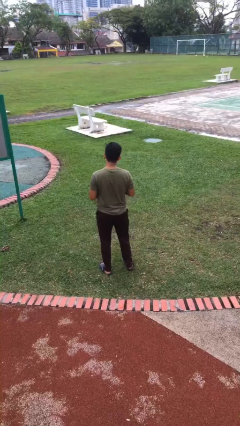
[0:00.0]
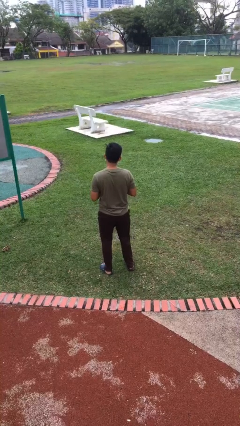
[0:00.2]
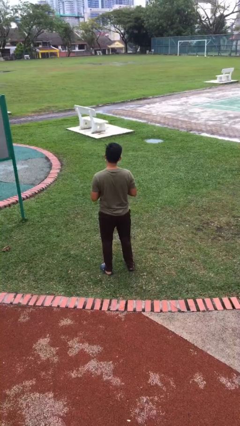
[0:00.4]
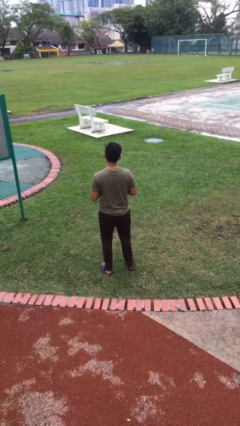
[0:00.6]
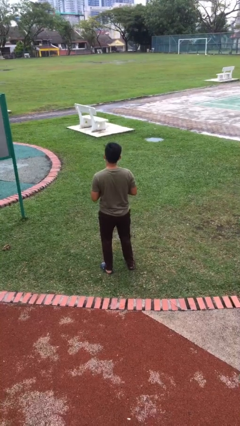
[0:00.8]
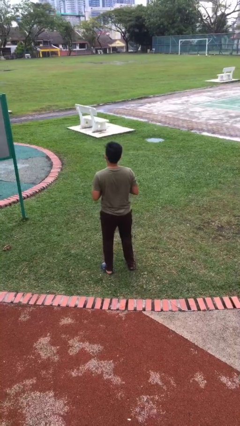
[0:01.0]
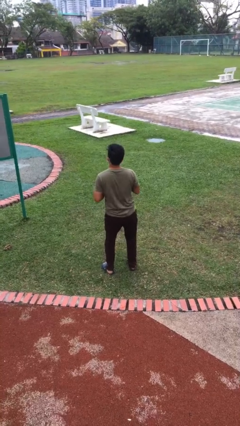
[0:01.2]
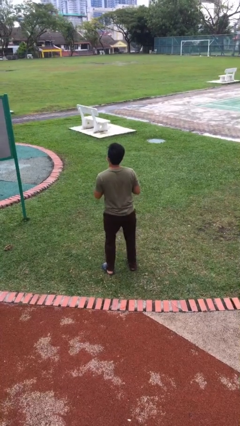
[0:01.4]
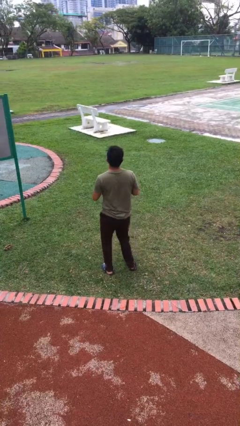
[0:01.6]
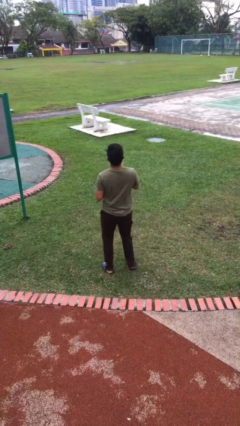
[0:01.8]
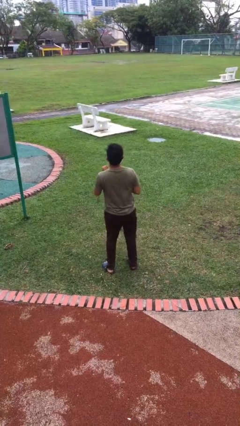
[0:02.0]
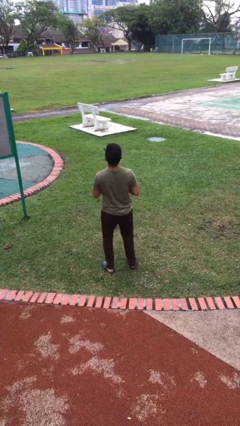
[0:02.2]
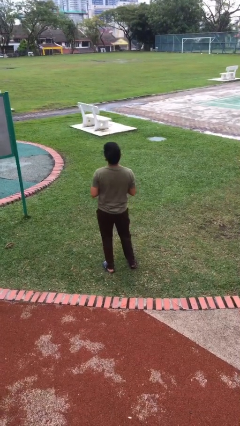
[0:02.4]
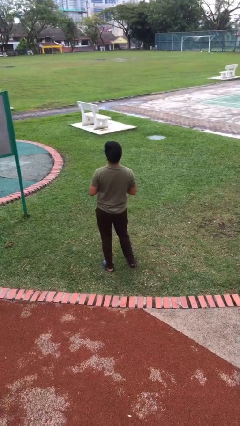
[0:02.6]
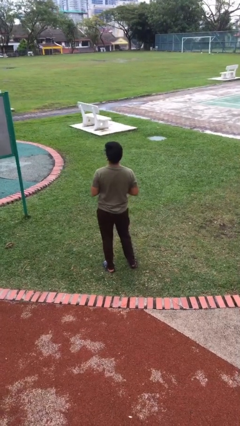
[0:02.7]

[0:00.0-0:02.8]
person wiggles hips

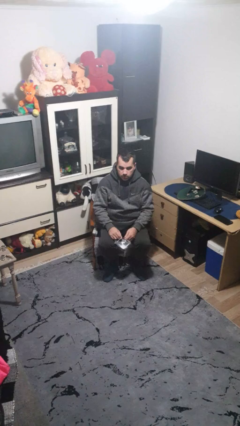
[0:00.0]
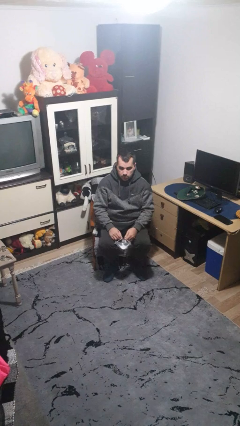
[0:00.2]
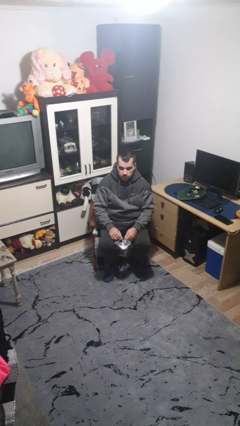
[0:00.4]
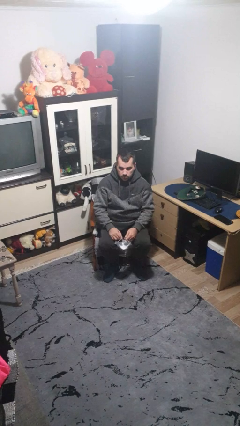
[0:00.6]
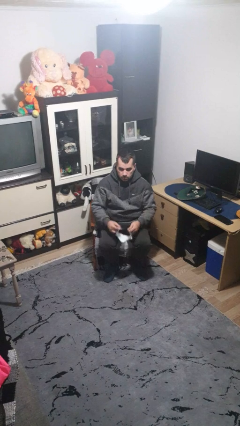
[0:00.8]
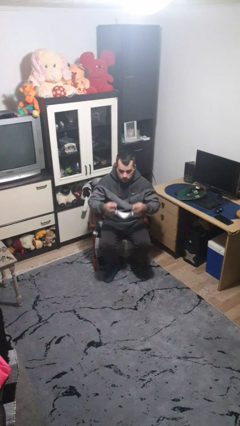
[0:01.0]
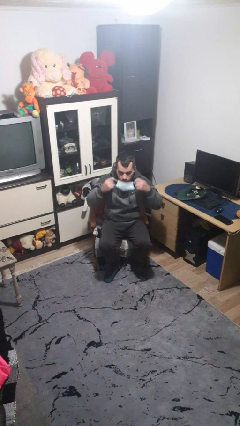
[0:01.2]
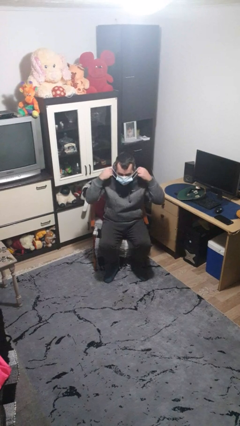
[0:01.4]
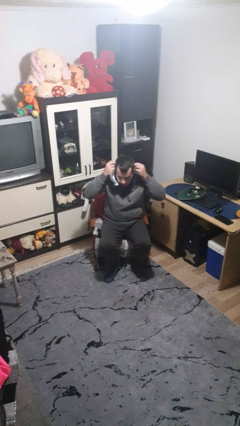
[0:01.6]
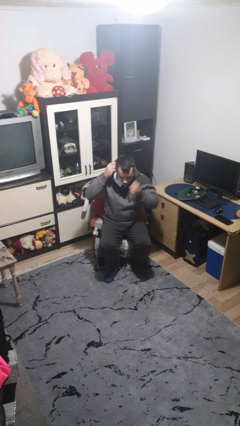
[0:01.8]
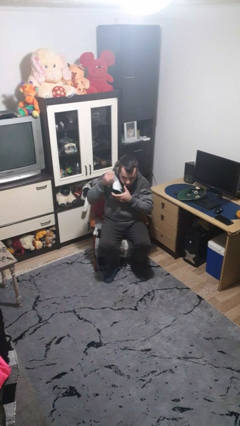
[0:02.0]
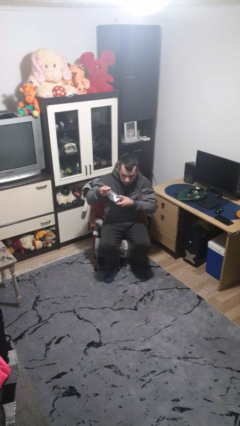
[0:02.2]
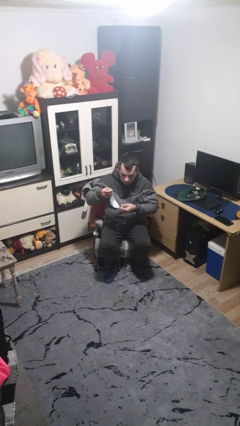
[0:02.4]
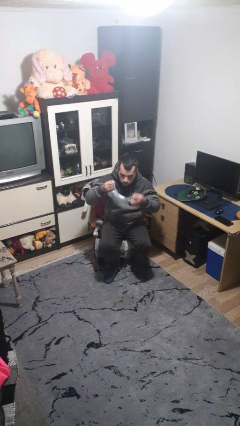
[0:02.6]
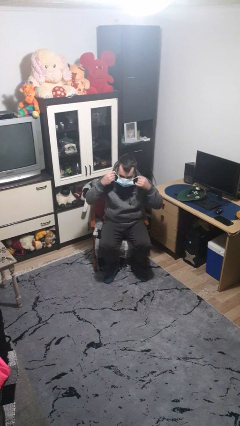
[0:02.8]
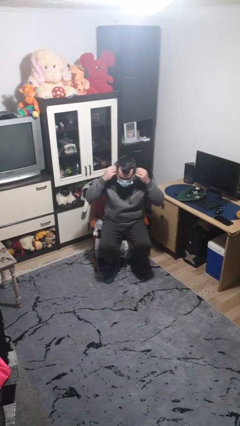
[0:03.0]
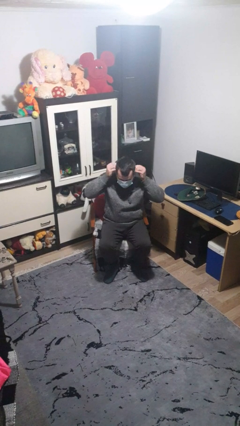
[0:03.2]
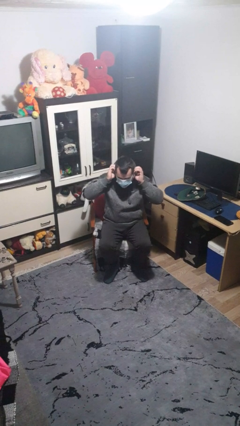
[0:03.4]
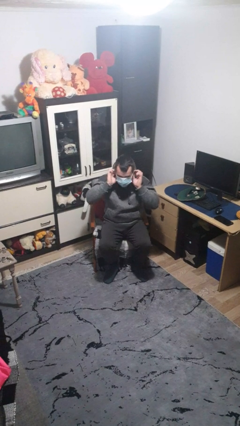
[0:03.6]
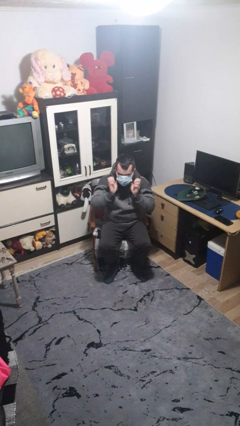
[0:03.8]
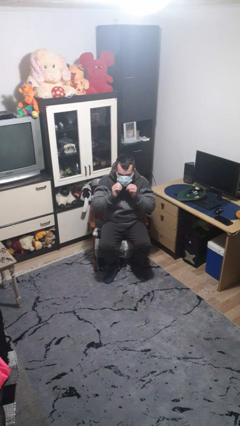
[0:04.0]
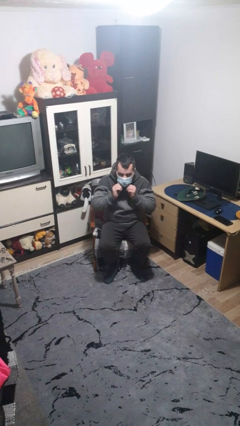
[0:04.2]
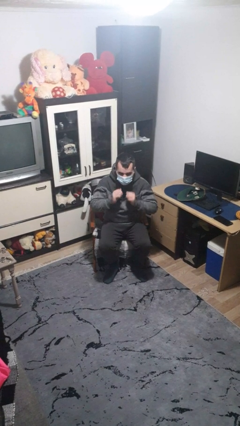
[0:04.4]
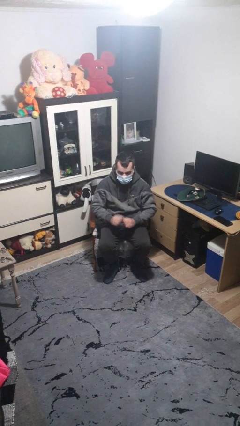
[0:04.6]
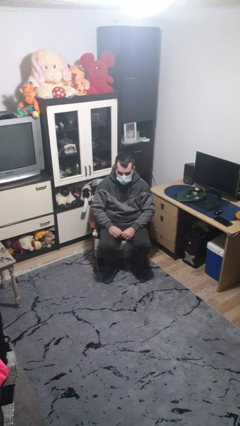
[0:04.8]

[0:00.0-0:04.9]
person puts on facemask

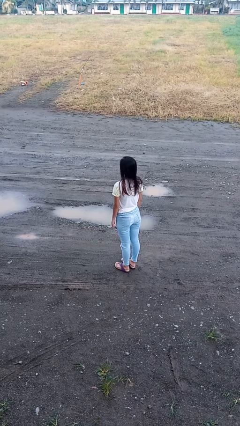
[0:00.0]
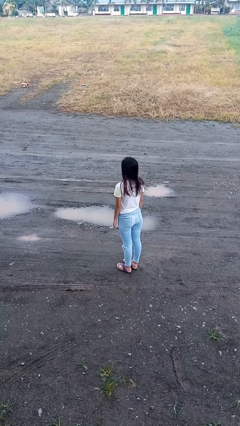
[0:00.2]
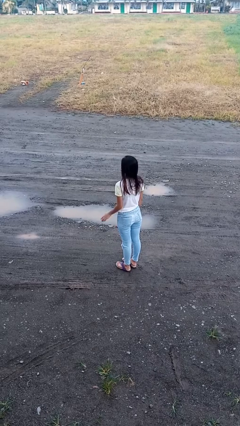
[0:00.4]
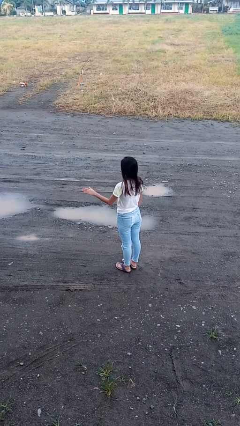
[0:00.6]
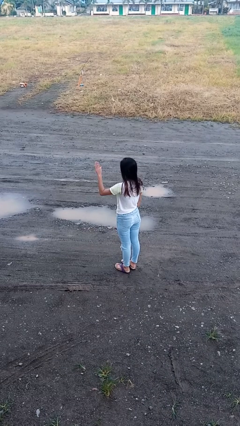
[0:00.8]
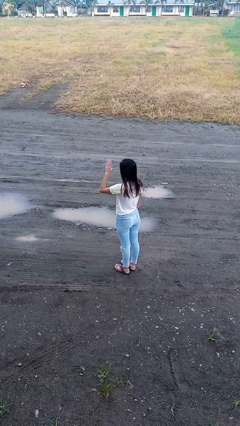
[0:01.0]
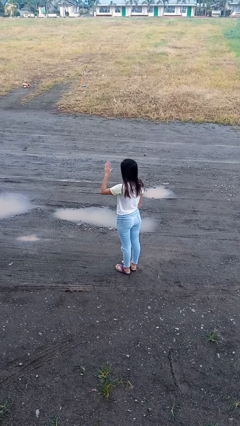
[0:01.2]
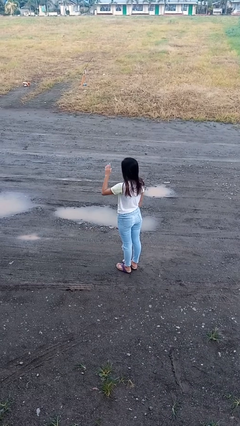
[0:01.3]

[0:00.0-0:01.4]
person gestures swipe right

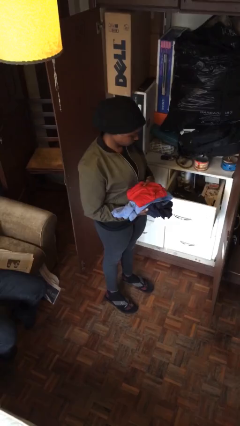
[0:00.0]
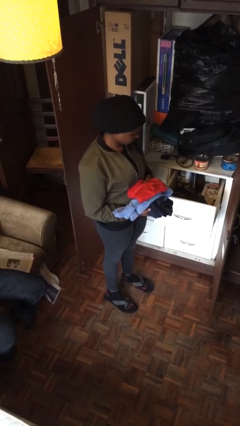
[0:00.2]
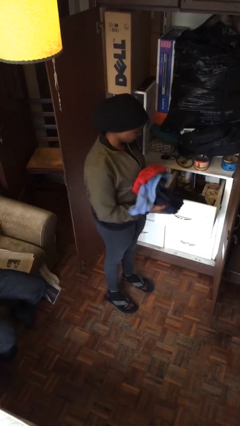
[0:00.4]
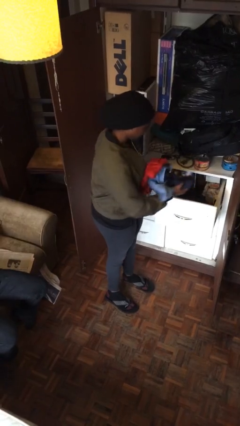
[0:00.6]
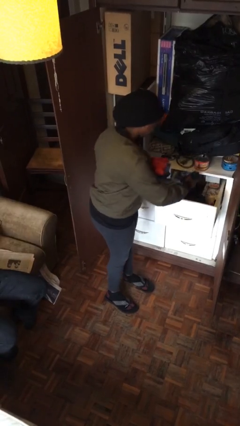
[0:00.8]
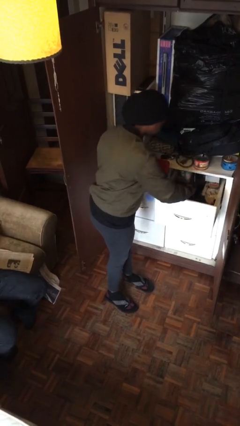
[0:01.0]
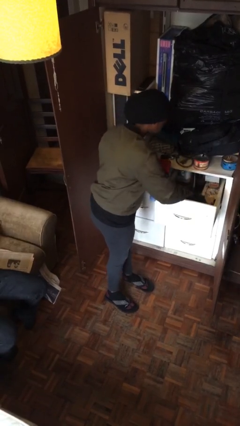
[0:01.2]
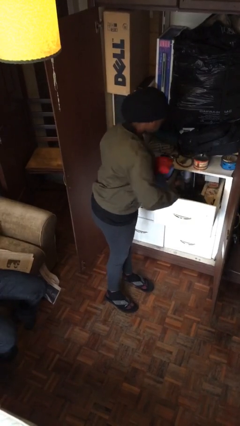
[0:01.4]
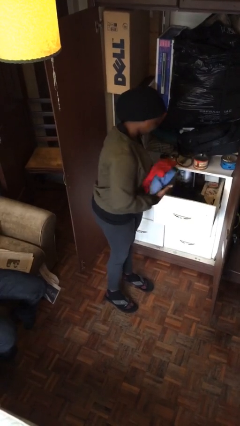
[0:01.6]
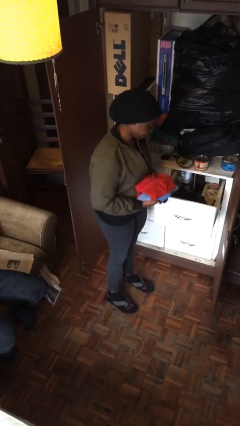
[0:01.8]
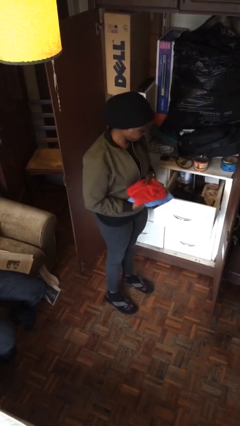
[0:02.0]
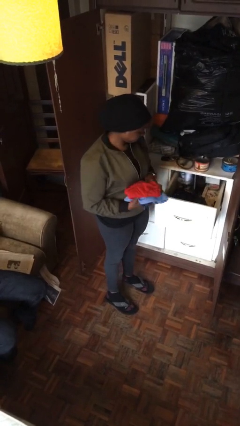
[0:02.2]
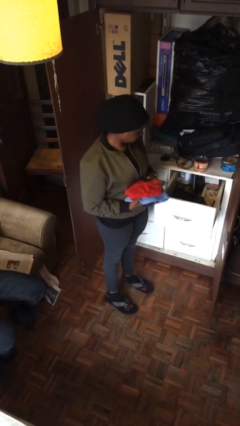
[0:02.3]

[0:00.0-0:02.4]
person puts clothes into dresser

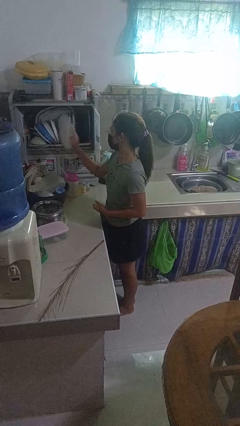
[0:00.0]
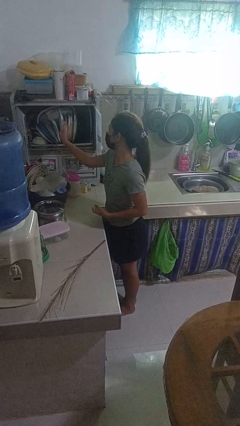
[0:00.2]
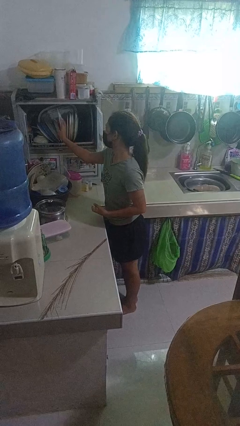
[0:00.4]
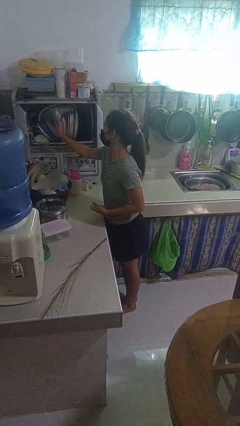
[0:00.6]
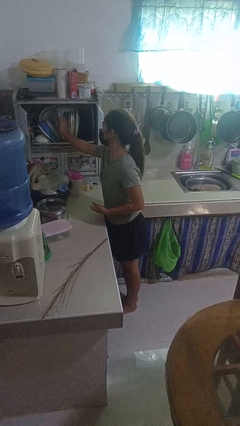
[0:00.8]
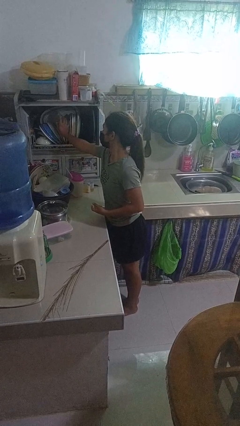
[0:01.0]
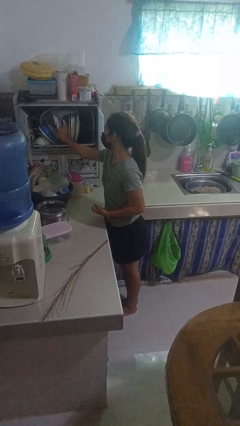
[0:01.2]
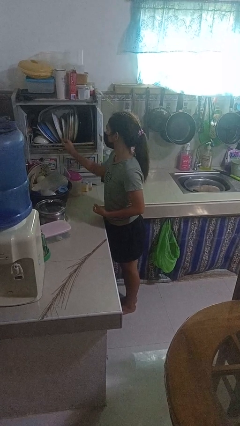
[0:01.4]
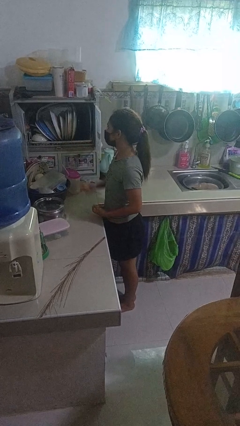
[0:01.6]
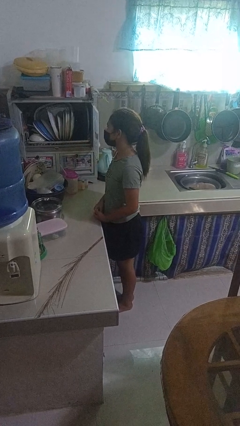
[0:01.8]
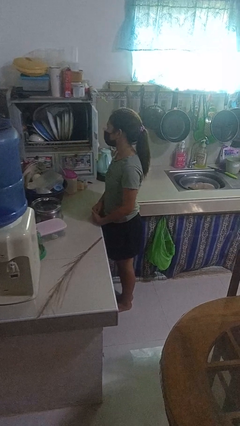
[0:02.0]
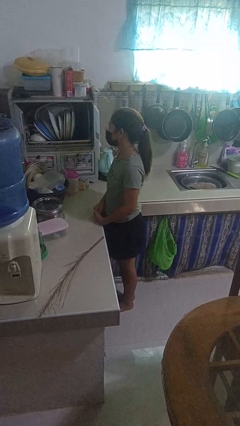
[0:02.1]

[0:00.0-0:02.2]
person puts object into kitchen drawer

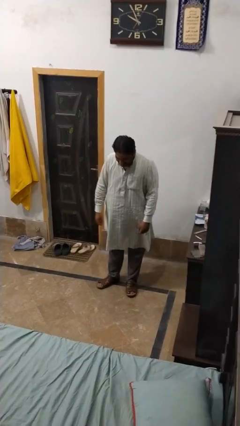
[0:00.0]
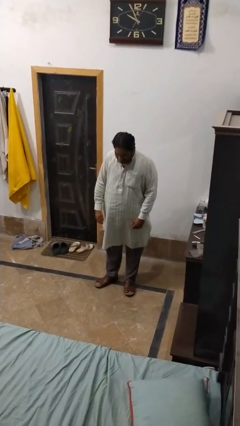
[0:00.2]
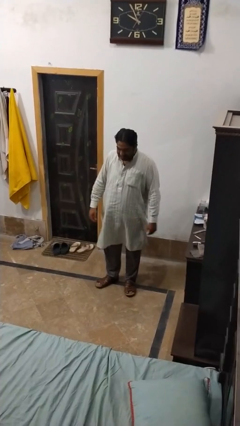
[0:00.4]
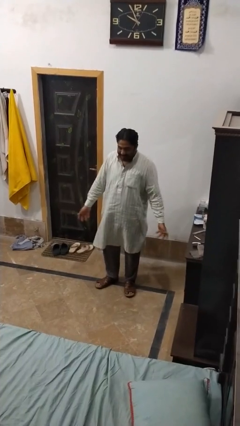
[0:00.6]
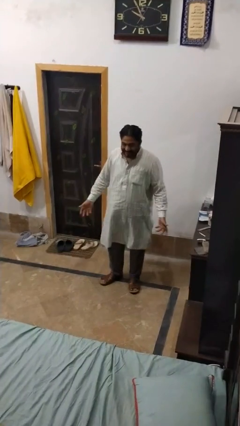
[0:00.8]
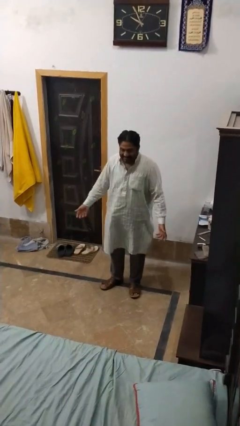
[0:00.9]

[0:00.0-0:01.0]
person dances in place

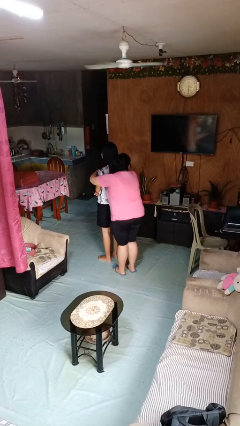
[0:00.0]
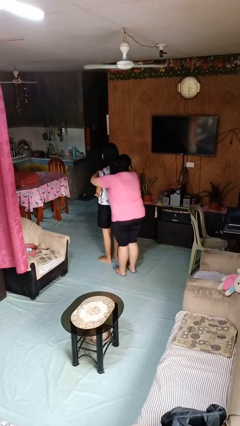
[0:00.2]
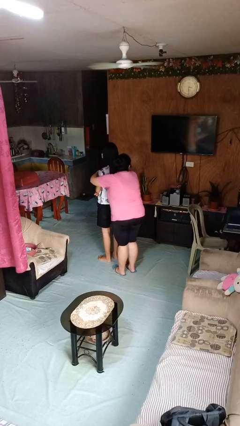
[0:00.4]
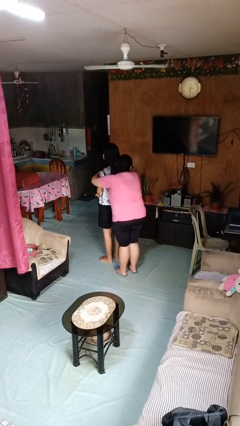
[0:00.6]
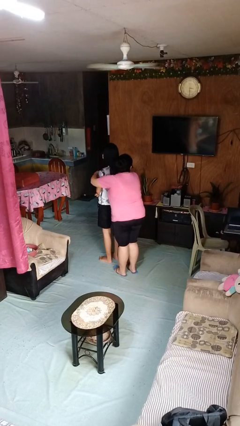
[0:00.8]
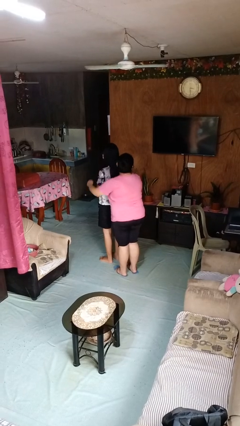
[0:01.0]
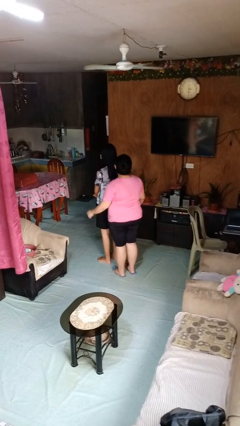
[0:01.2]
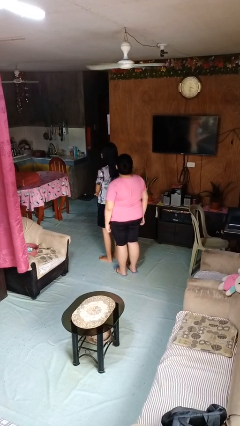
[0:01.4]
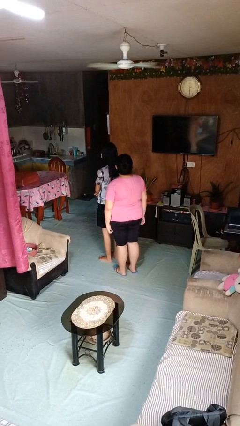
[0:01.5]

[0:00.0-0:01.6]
person hugs person from behind

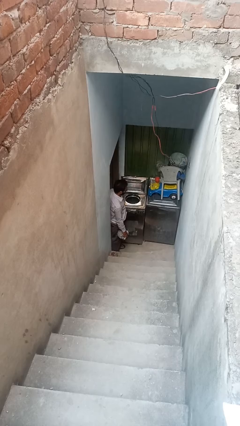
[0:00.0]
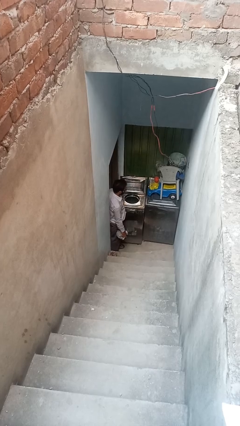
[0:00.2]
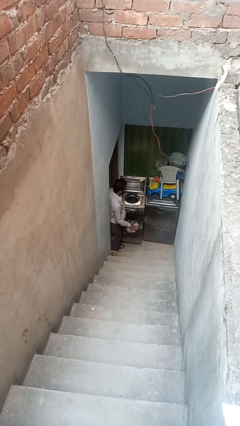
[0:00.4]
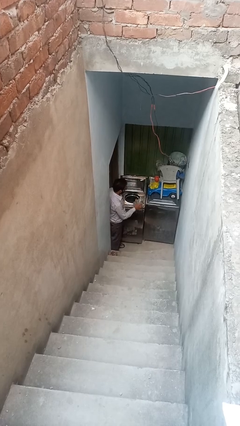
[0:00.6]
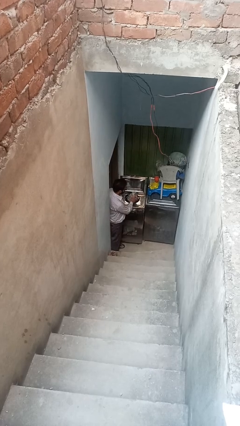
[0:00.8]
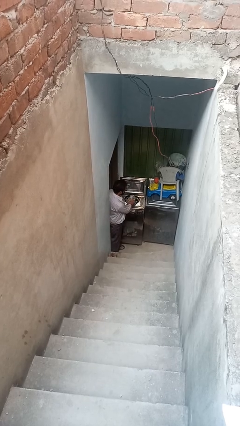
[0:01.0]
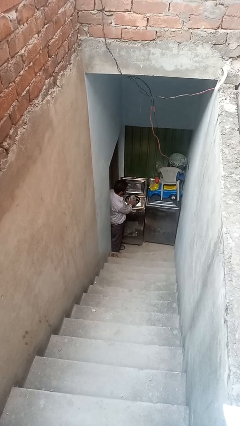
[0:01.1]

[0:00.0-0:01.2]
person loads clotheswasher
